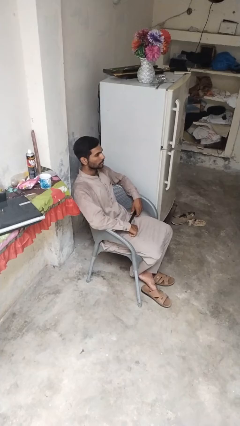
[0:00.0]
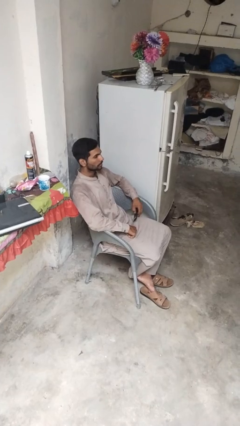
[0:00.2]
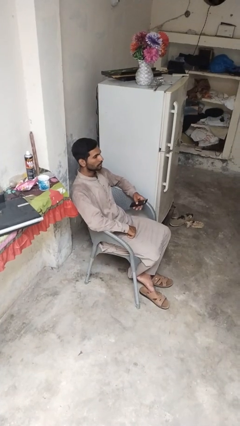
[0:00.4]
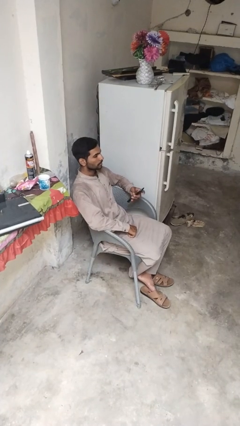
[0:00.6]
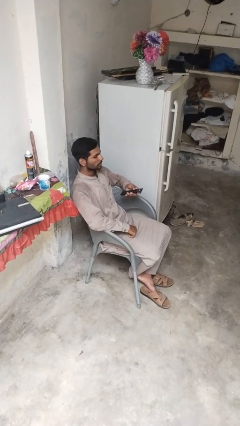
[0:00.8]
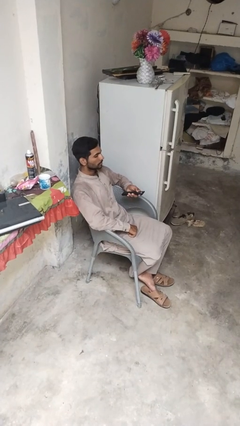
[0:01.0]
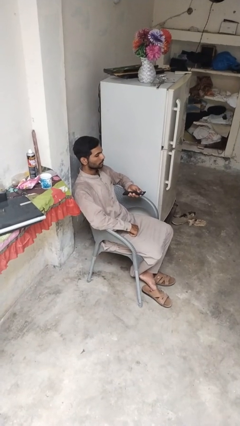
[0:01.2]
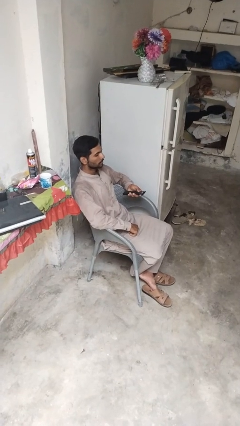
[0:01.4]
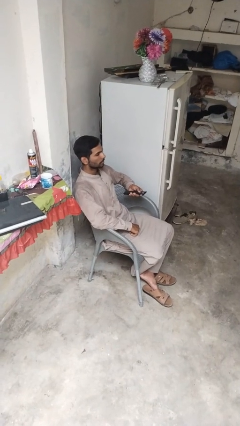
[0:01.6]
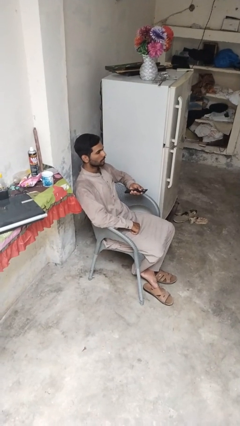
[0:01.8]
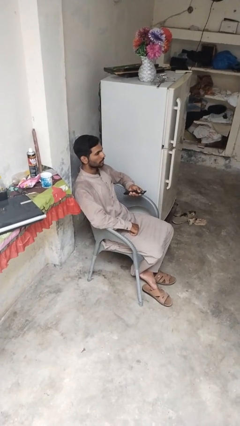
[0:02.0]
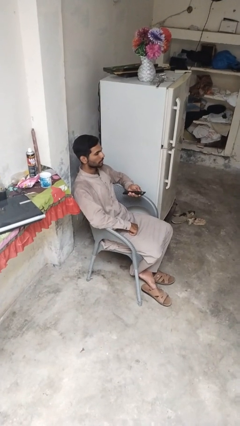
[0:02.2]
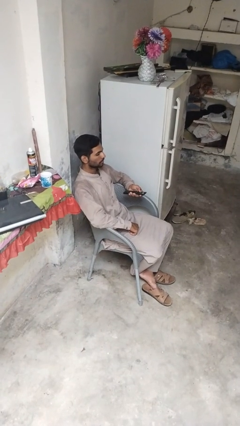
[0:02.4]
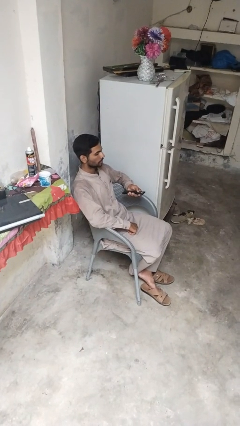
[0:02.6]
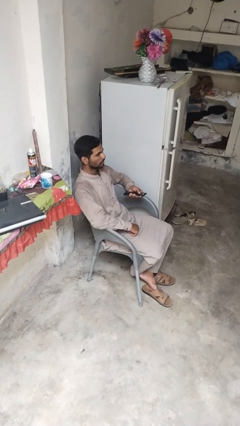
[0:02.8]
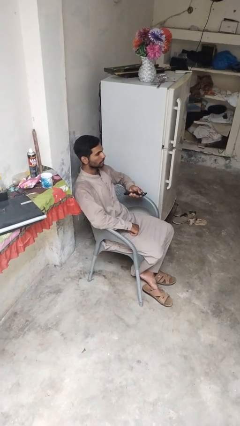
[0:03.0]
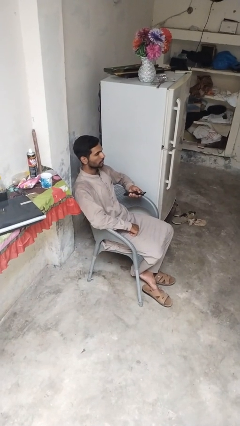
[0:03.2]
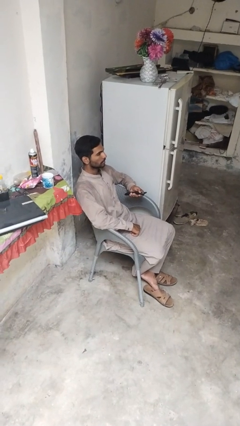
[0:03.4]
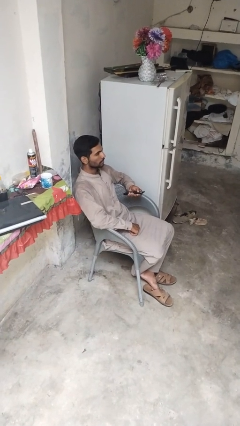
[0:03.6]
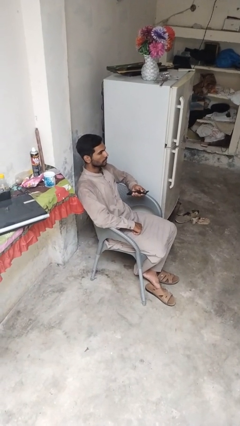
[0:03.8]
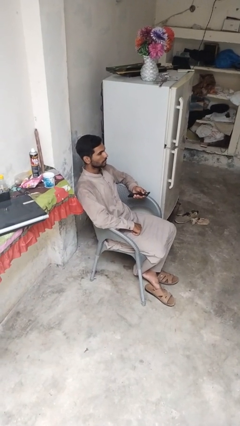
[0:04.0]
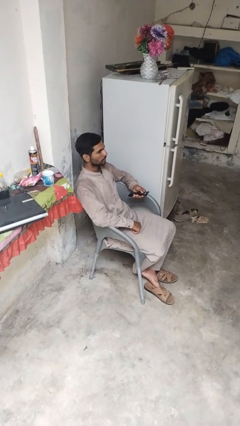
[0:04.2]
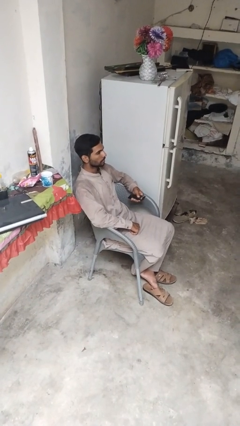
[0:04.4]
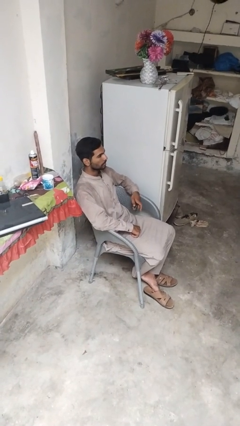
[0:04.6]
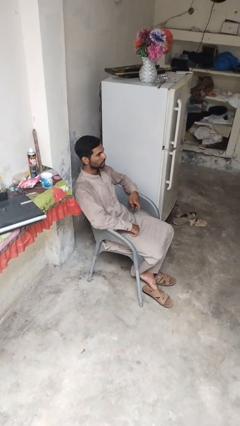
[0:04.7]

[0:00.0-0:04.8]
person uses television remote

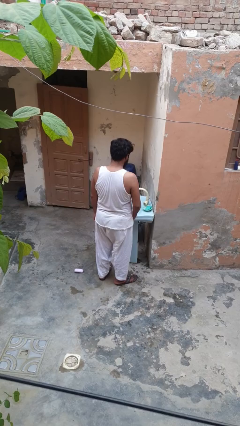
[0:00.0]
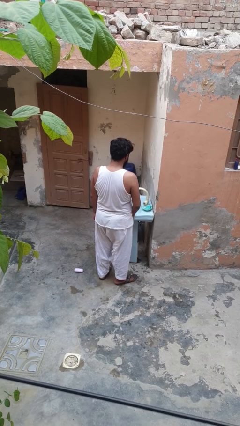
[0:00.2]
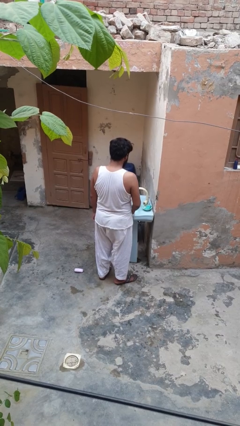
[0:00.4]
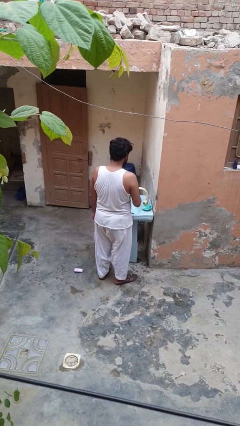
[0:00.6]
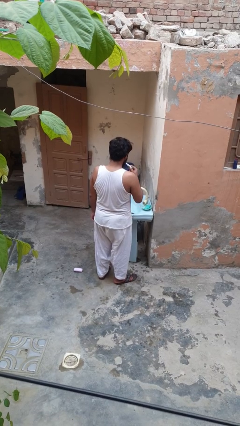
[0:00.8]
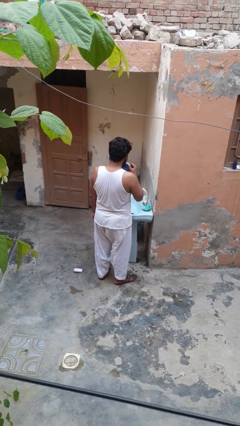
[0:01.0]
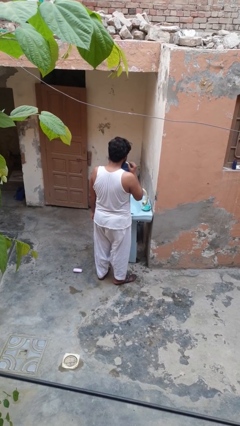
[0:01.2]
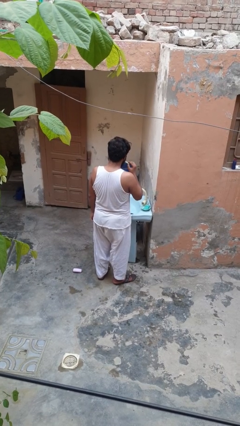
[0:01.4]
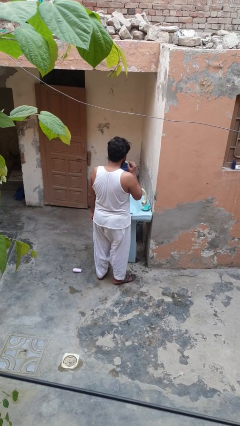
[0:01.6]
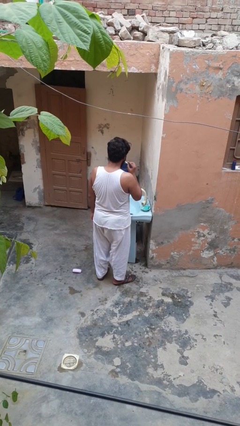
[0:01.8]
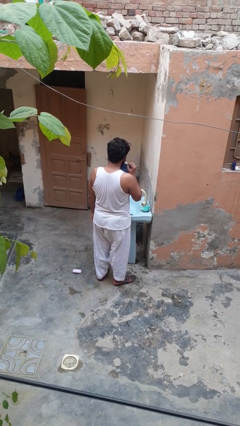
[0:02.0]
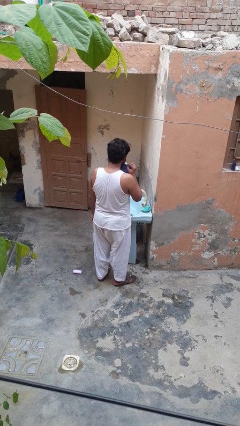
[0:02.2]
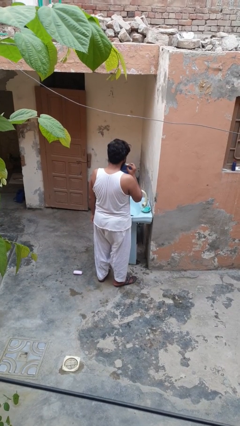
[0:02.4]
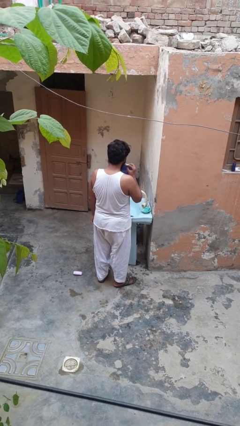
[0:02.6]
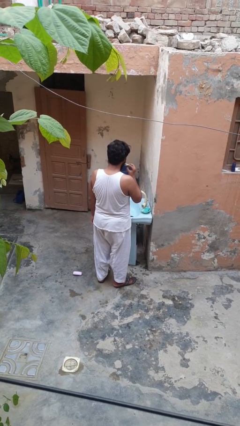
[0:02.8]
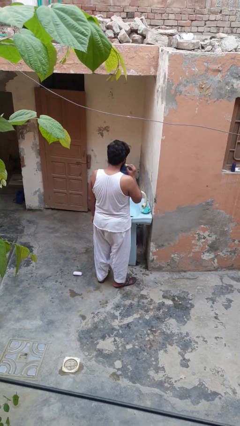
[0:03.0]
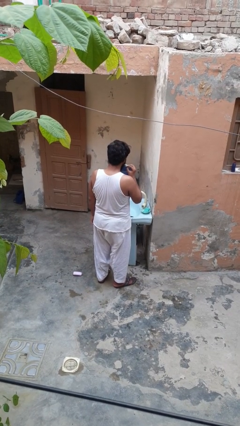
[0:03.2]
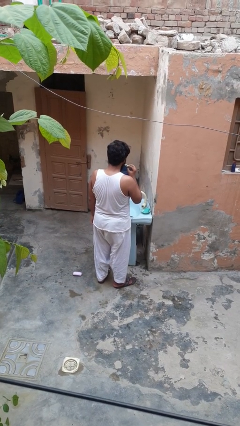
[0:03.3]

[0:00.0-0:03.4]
person brushes teeth

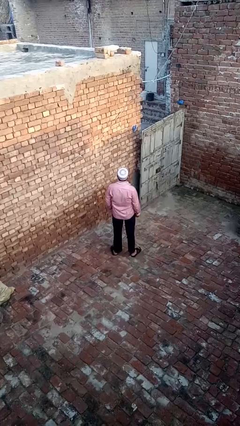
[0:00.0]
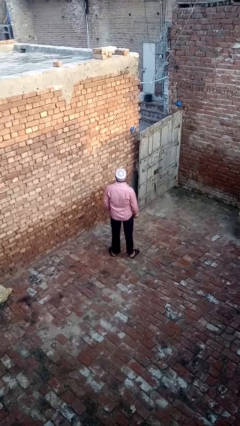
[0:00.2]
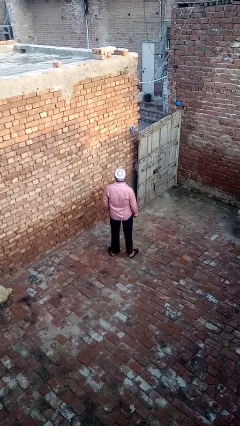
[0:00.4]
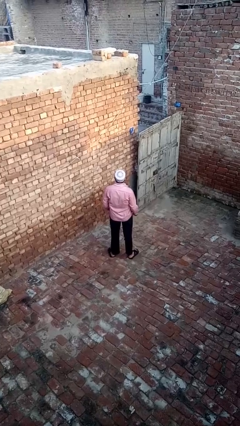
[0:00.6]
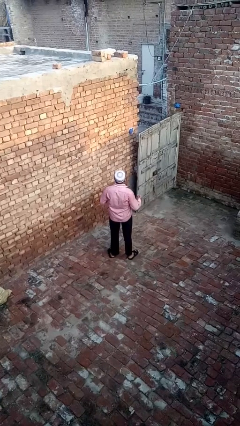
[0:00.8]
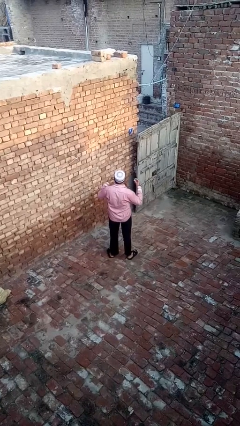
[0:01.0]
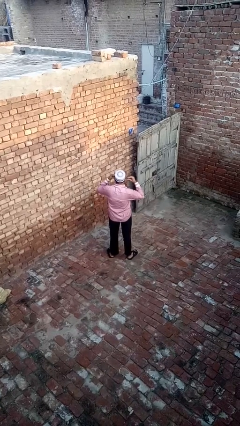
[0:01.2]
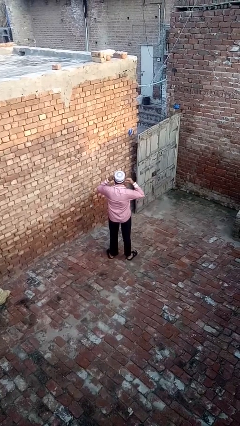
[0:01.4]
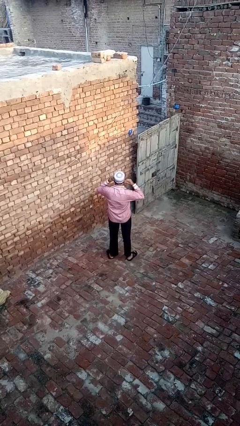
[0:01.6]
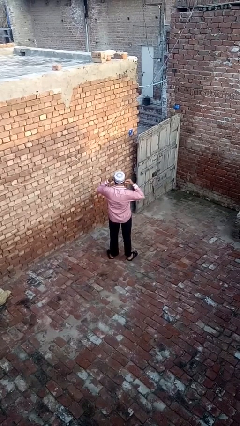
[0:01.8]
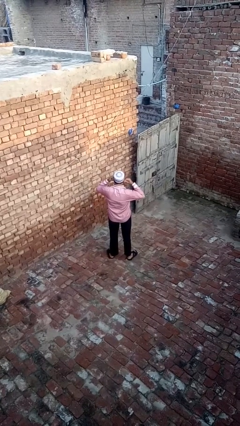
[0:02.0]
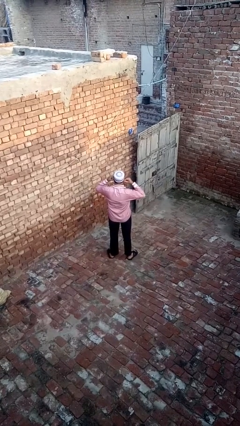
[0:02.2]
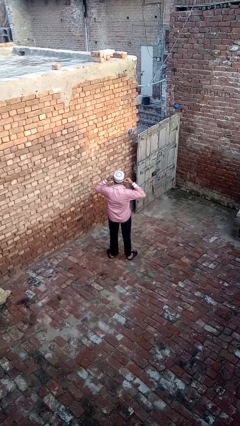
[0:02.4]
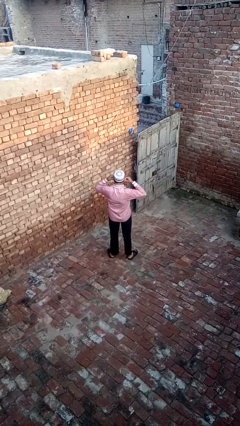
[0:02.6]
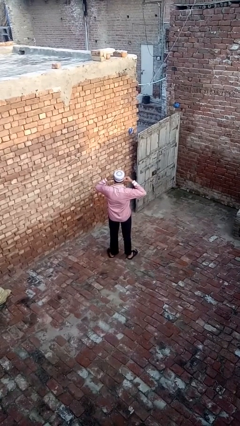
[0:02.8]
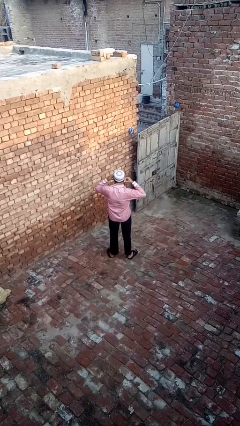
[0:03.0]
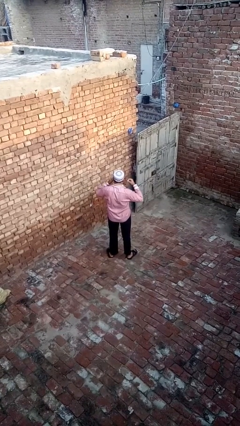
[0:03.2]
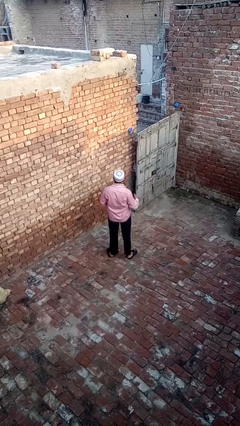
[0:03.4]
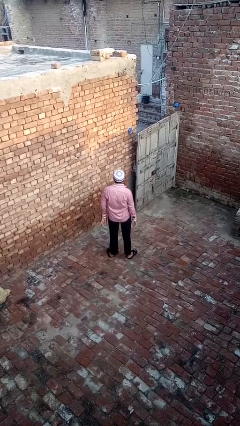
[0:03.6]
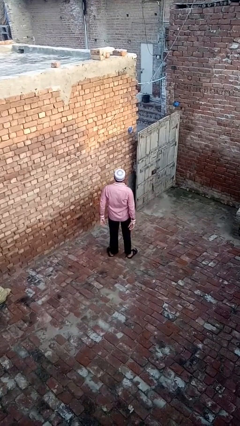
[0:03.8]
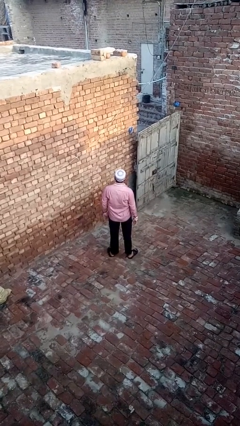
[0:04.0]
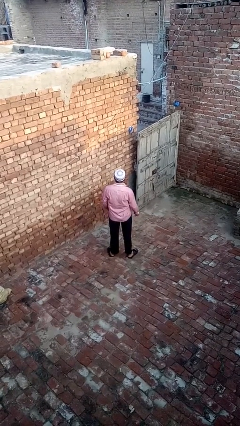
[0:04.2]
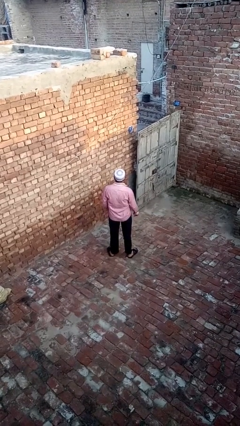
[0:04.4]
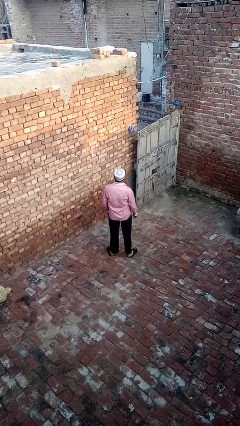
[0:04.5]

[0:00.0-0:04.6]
person puts on headphones

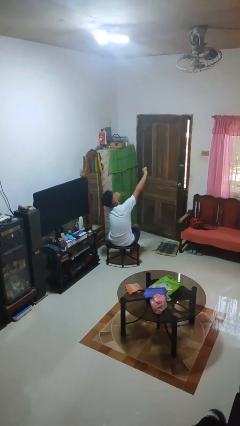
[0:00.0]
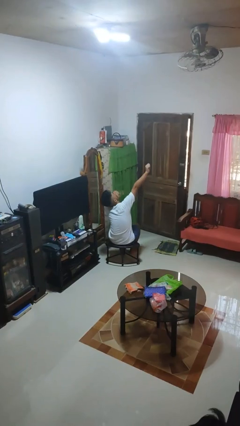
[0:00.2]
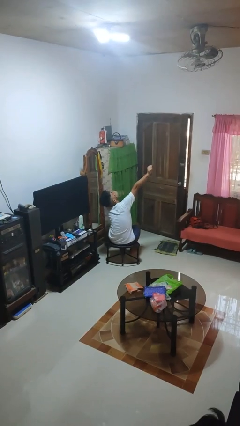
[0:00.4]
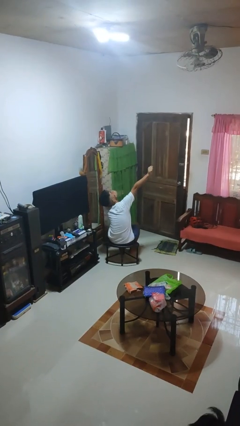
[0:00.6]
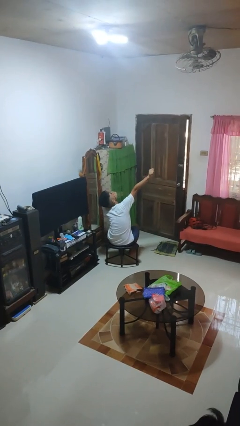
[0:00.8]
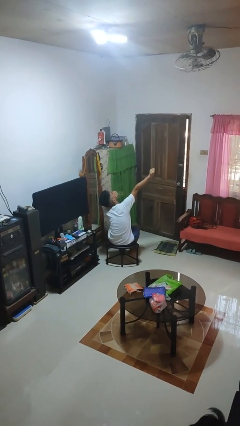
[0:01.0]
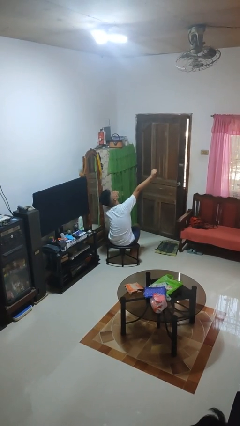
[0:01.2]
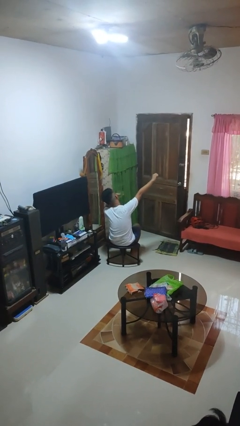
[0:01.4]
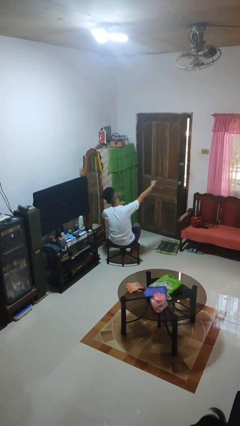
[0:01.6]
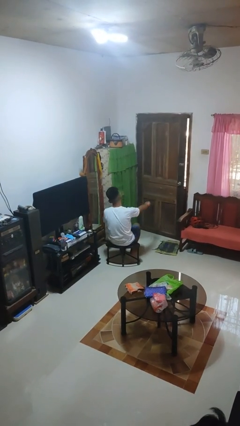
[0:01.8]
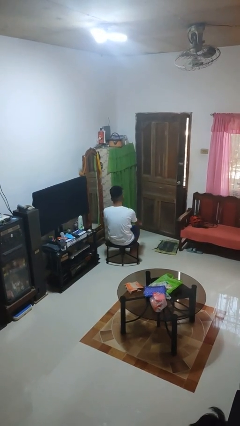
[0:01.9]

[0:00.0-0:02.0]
person yawns

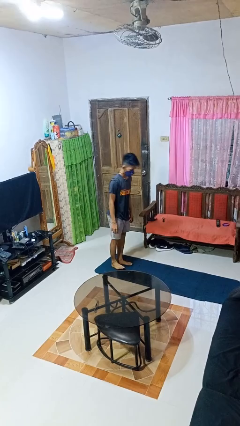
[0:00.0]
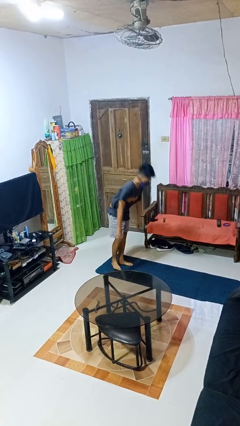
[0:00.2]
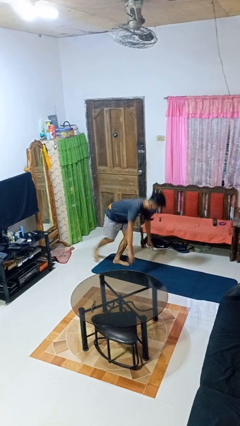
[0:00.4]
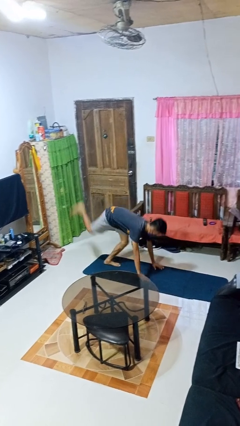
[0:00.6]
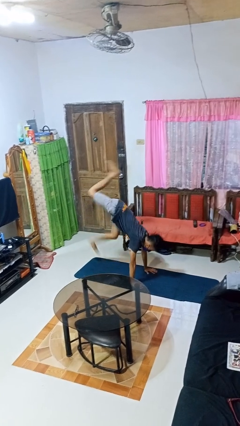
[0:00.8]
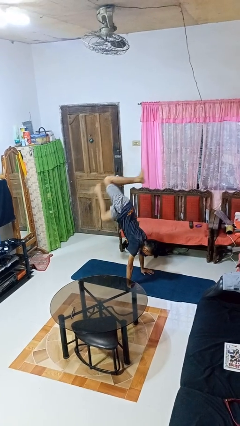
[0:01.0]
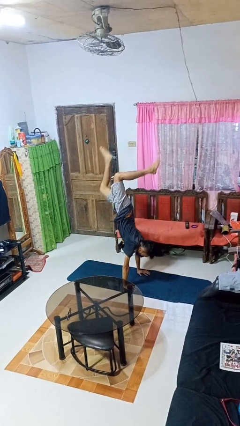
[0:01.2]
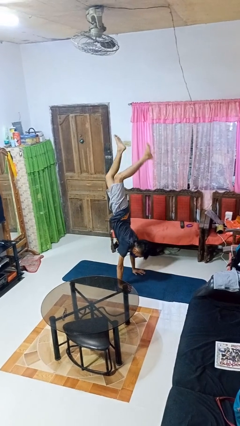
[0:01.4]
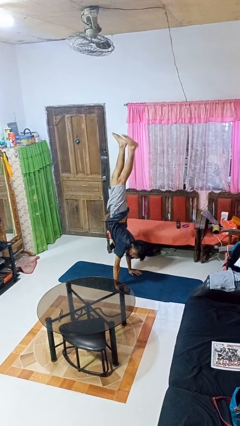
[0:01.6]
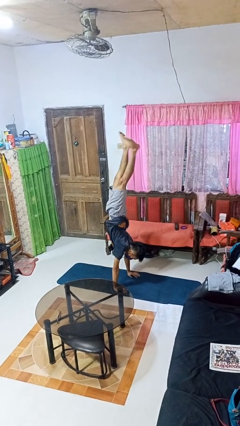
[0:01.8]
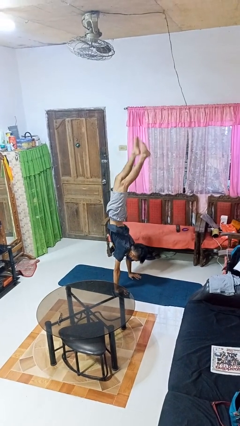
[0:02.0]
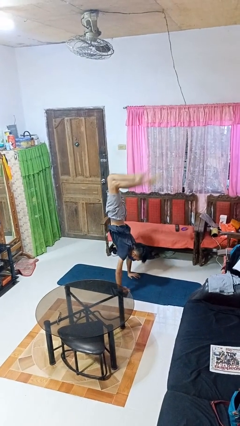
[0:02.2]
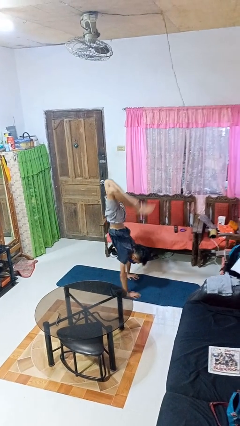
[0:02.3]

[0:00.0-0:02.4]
person handstand

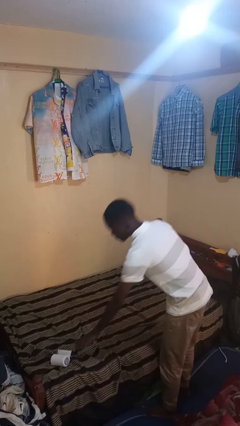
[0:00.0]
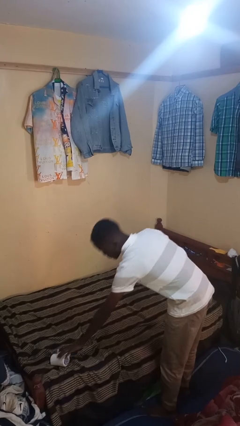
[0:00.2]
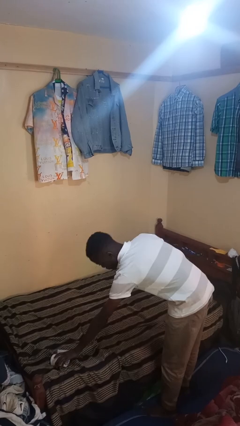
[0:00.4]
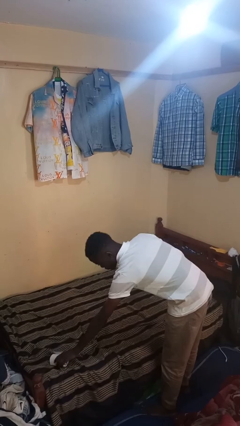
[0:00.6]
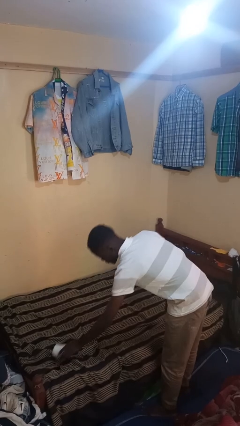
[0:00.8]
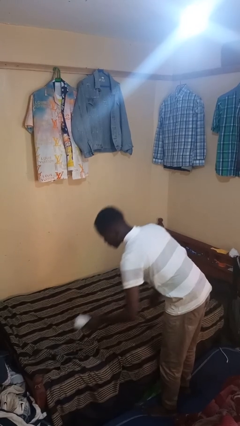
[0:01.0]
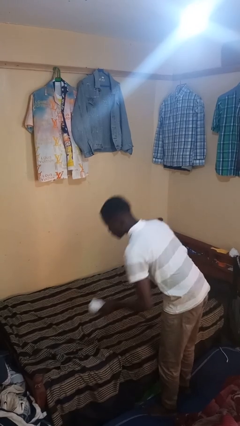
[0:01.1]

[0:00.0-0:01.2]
person picks up object from bed
